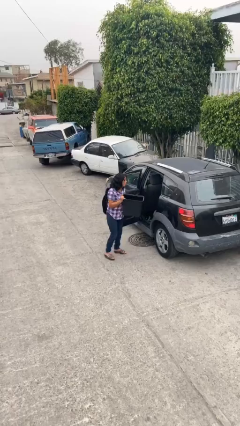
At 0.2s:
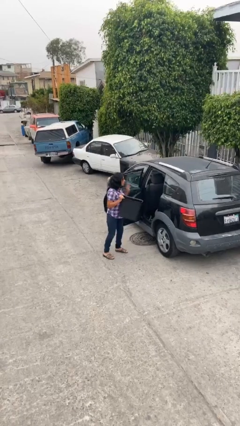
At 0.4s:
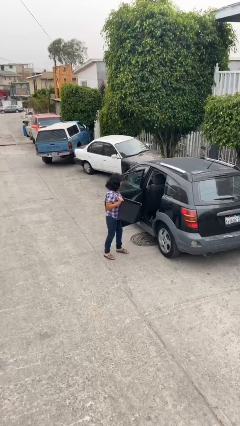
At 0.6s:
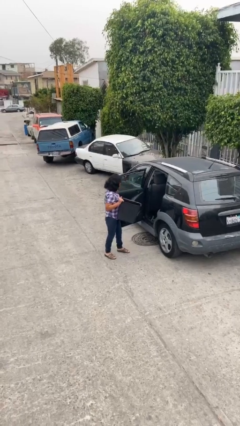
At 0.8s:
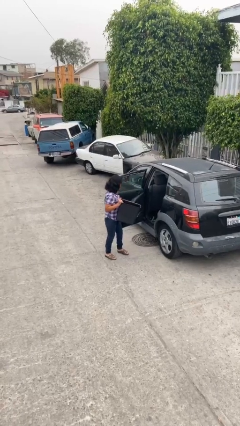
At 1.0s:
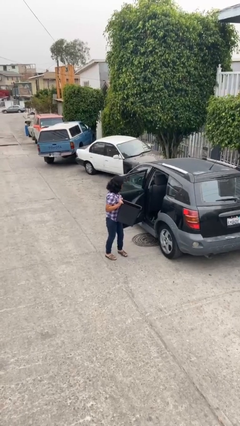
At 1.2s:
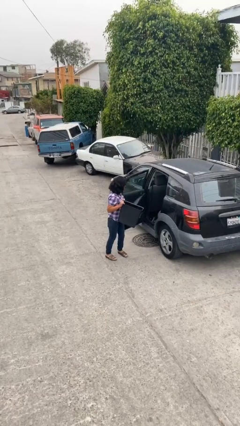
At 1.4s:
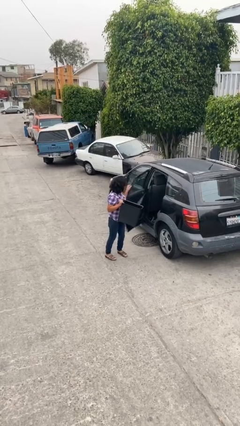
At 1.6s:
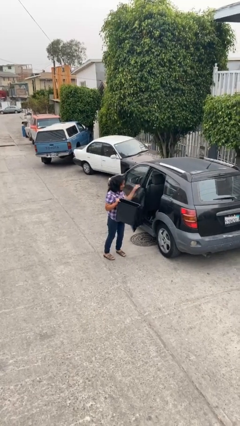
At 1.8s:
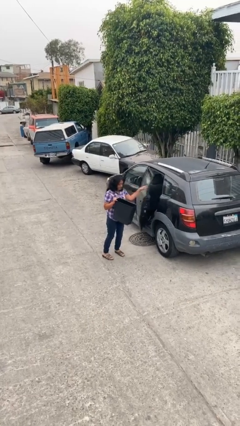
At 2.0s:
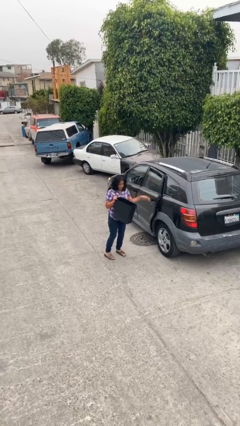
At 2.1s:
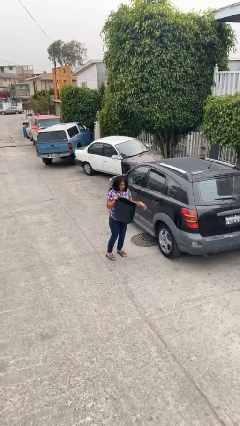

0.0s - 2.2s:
person closes car door

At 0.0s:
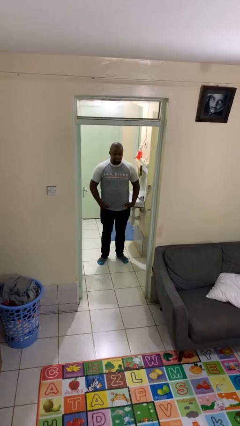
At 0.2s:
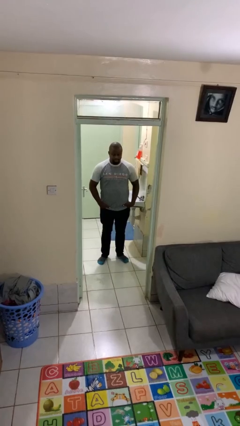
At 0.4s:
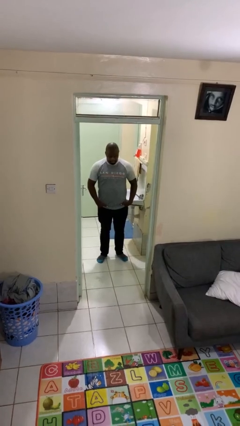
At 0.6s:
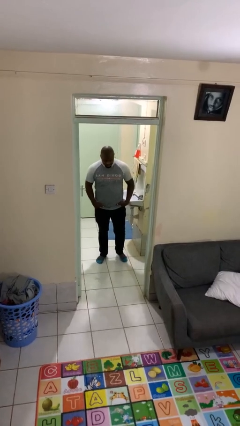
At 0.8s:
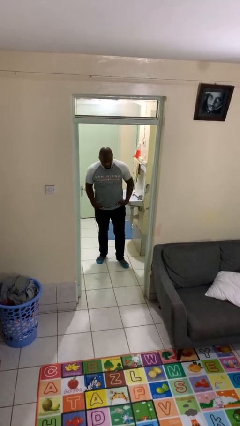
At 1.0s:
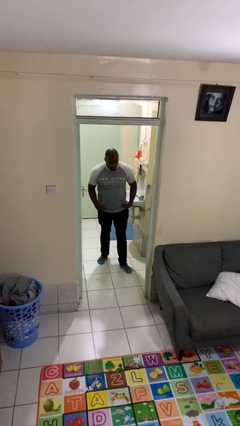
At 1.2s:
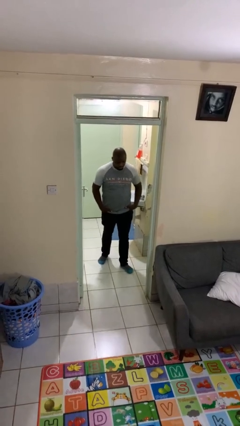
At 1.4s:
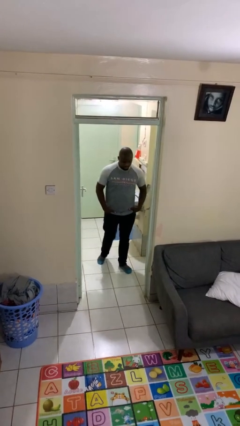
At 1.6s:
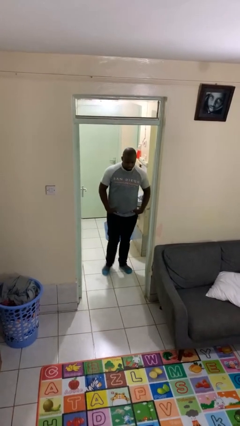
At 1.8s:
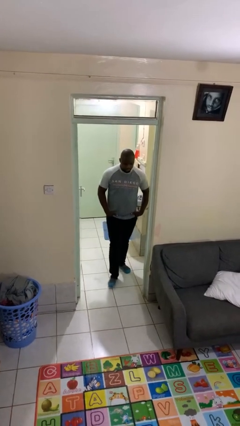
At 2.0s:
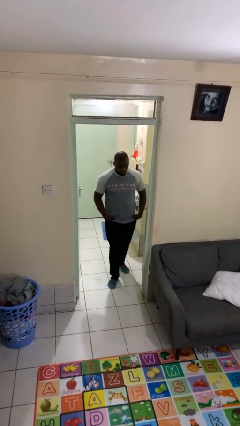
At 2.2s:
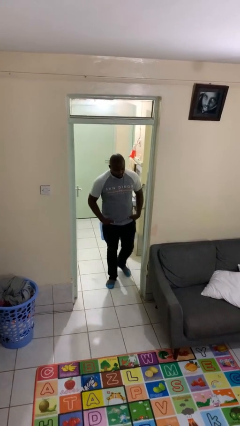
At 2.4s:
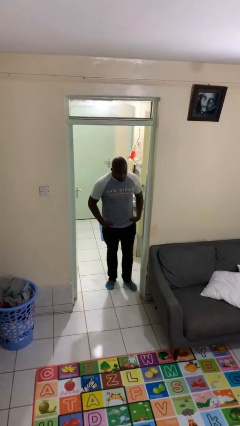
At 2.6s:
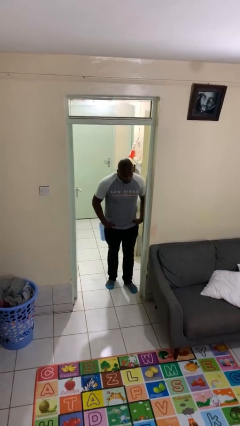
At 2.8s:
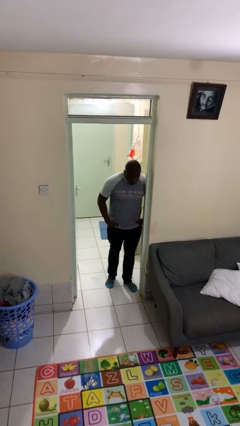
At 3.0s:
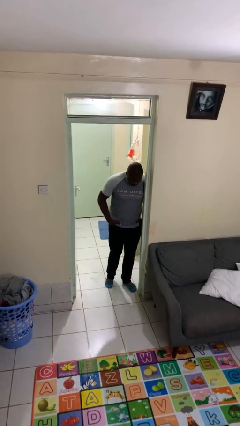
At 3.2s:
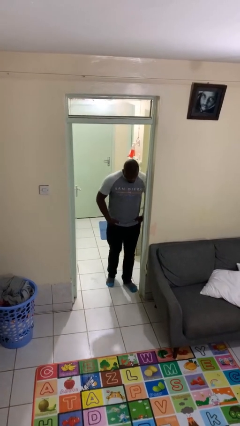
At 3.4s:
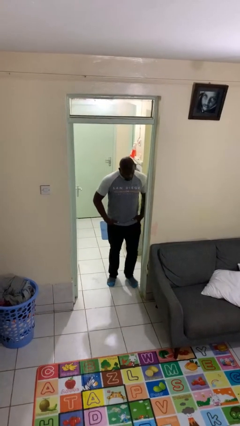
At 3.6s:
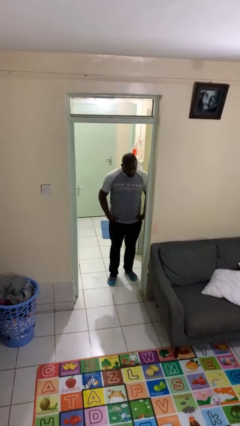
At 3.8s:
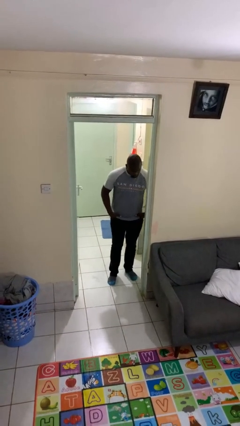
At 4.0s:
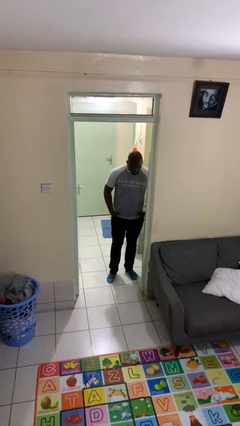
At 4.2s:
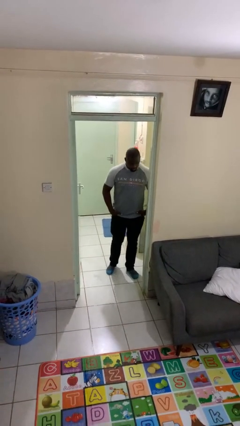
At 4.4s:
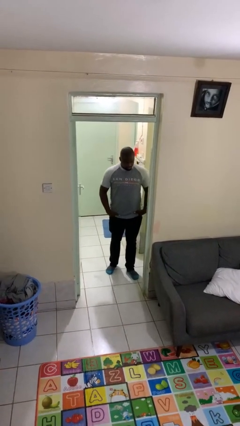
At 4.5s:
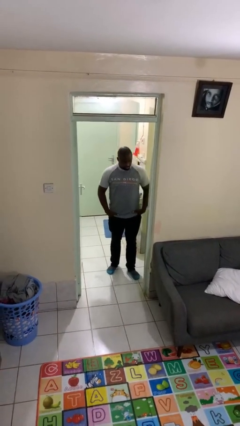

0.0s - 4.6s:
person bumps into wall

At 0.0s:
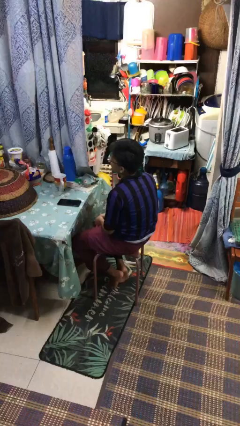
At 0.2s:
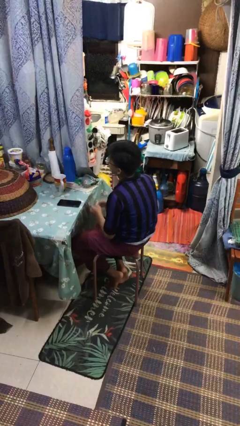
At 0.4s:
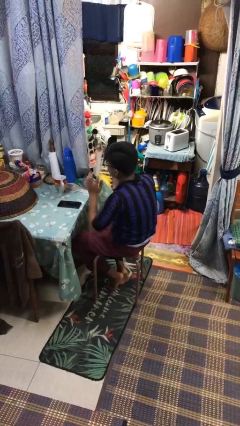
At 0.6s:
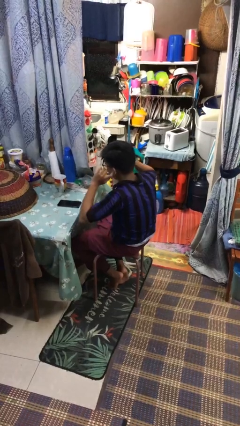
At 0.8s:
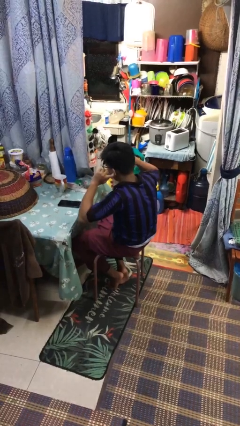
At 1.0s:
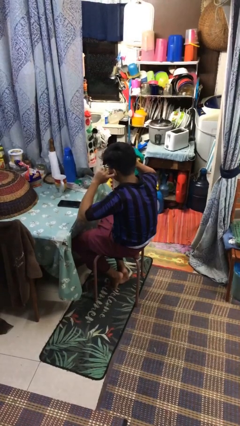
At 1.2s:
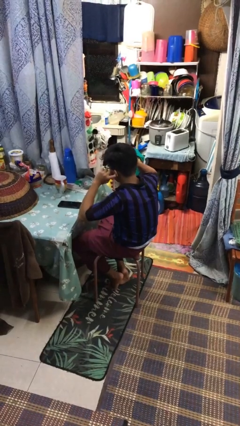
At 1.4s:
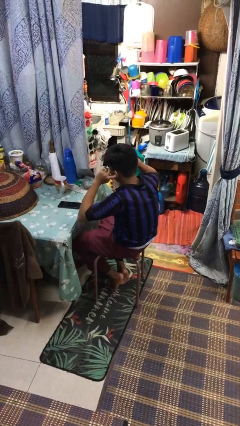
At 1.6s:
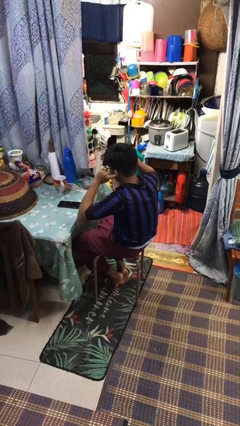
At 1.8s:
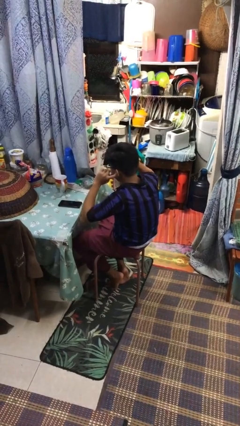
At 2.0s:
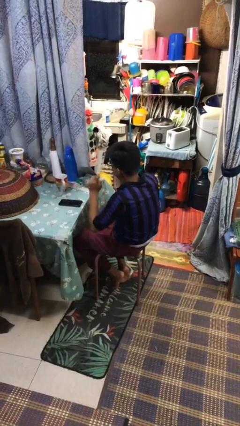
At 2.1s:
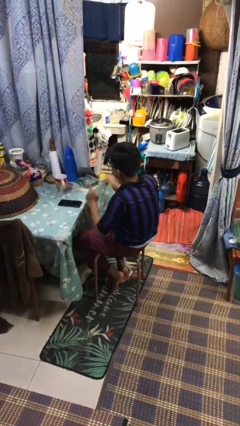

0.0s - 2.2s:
person puts fingers in ear

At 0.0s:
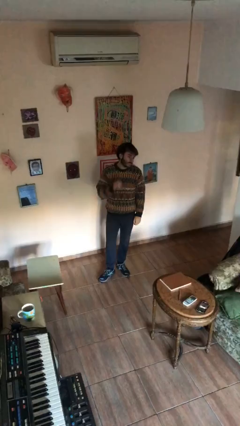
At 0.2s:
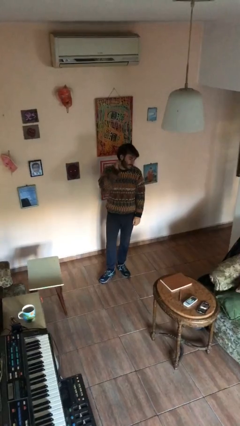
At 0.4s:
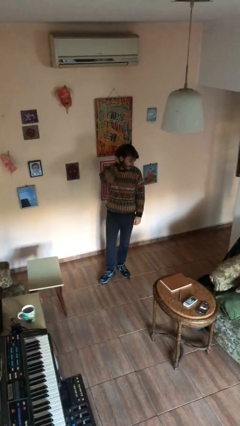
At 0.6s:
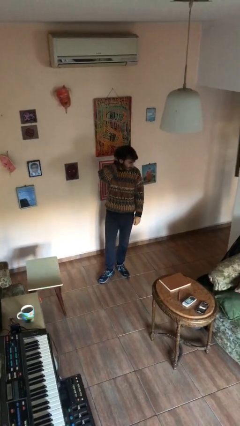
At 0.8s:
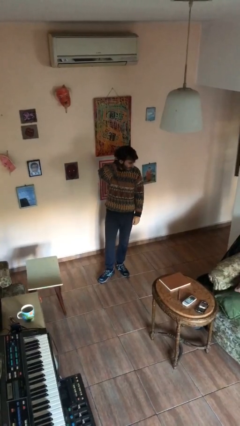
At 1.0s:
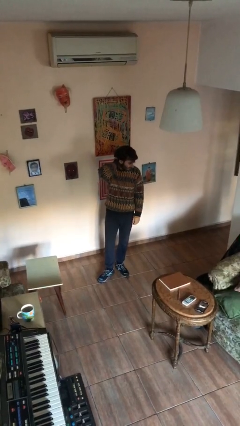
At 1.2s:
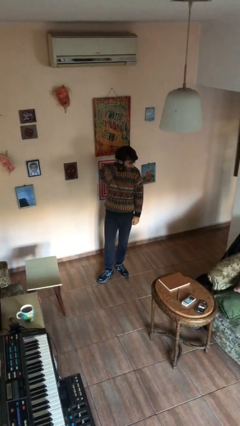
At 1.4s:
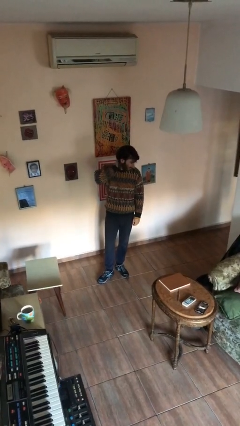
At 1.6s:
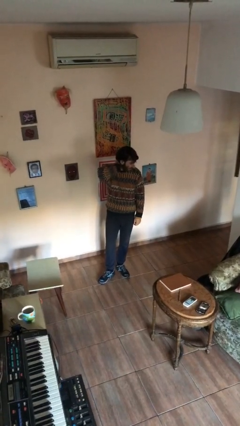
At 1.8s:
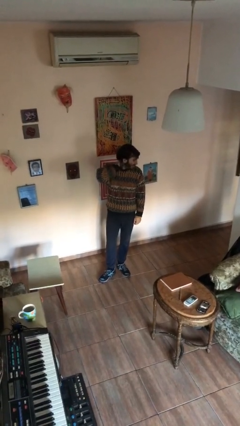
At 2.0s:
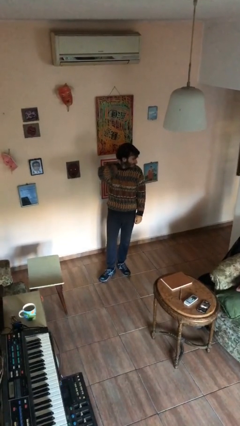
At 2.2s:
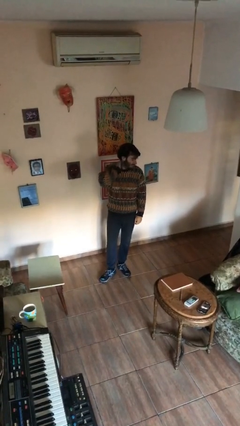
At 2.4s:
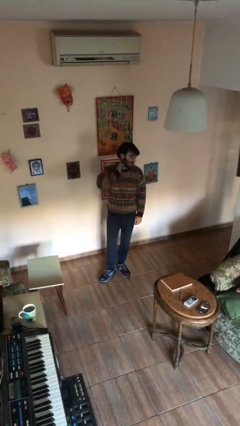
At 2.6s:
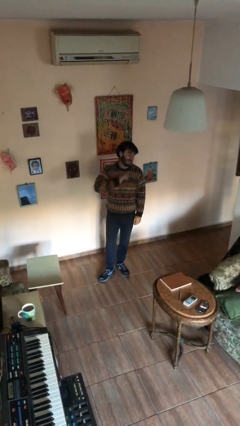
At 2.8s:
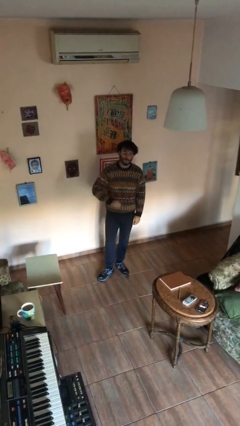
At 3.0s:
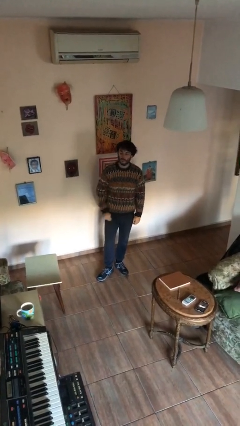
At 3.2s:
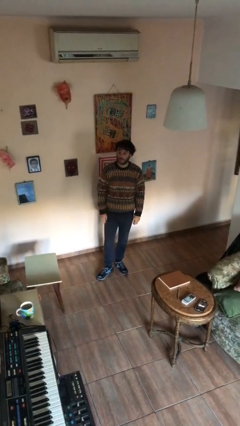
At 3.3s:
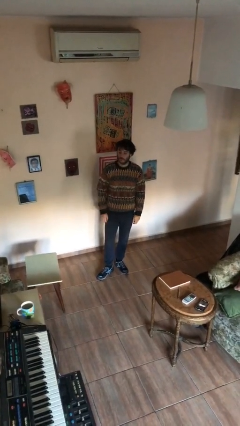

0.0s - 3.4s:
person scratches face

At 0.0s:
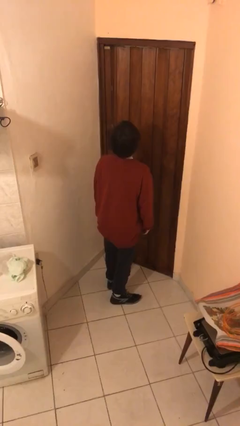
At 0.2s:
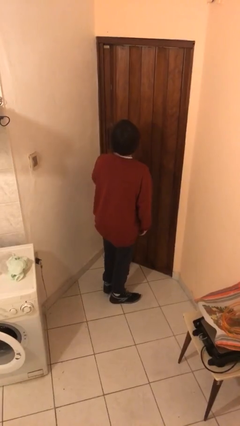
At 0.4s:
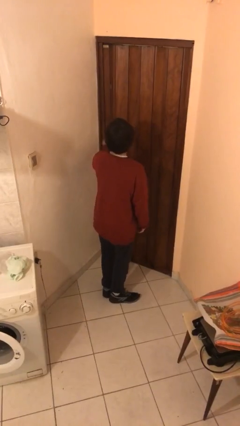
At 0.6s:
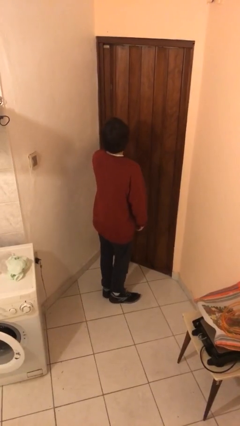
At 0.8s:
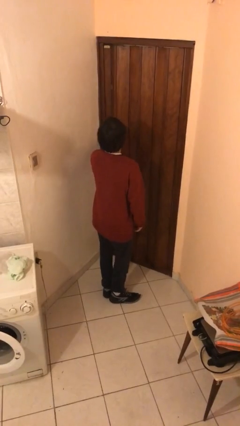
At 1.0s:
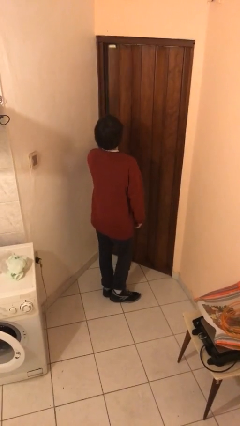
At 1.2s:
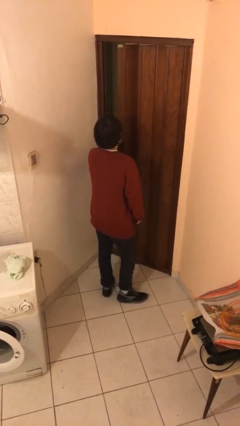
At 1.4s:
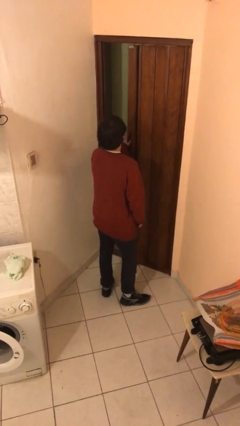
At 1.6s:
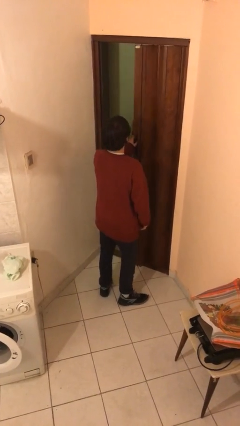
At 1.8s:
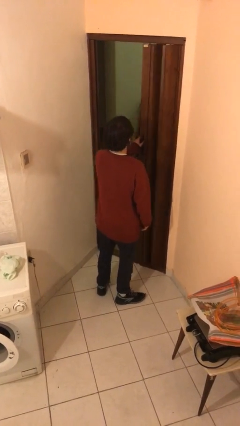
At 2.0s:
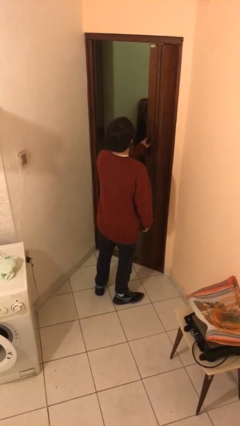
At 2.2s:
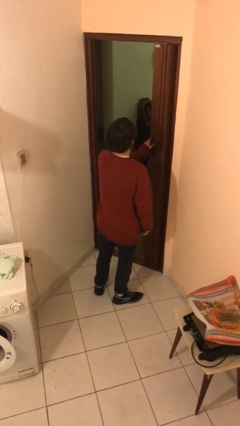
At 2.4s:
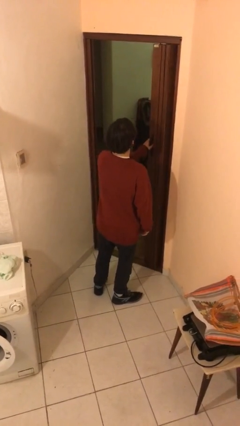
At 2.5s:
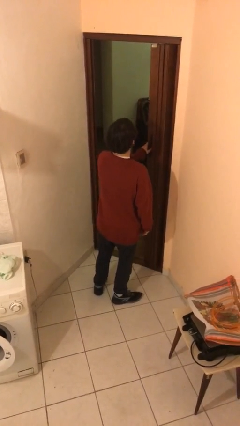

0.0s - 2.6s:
person opens sliding door

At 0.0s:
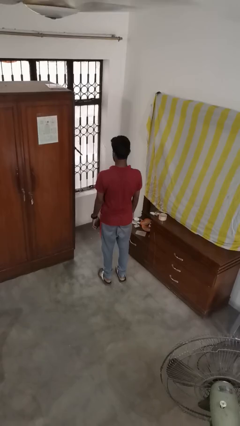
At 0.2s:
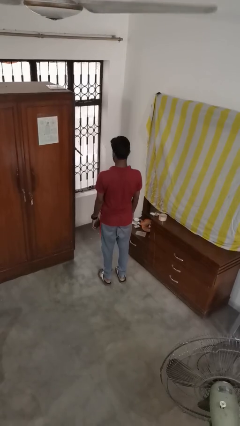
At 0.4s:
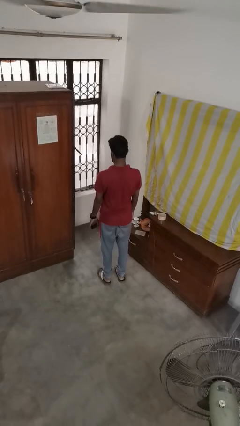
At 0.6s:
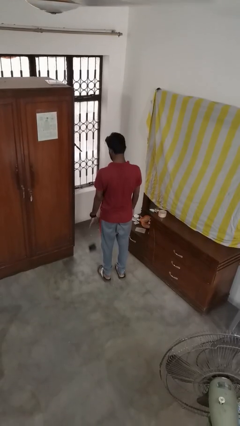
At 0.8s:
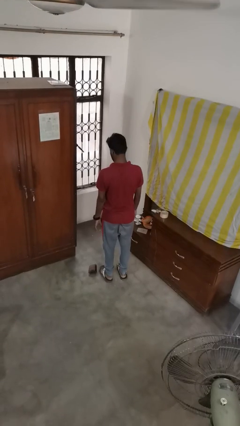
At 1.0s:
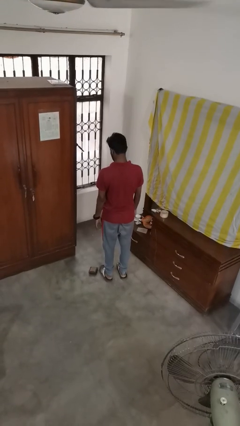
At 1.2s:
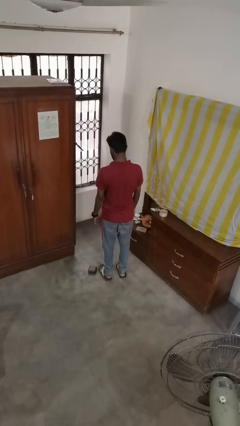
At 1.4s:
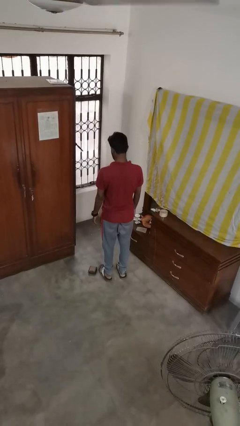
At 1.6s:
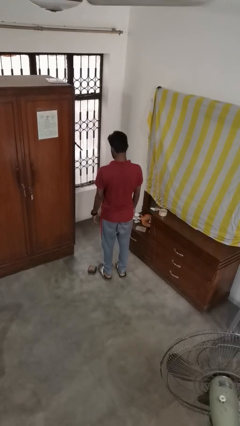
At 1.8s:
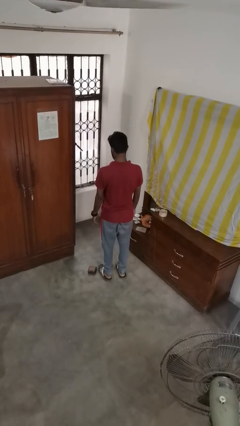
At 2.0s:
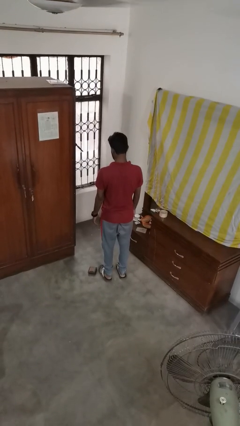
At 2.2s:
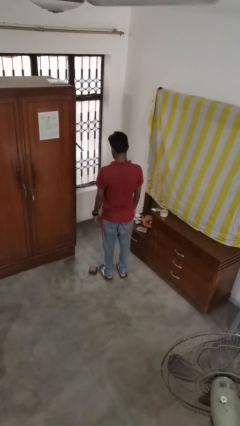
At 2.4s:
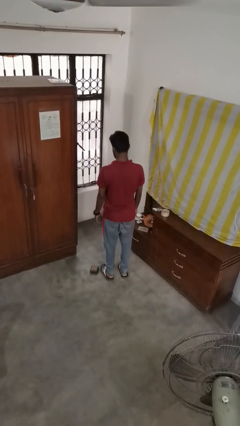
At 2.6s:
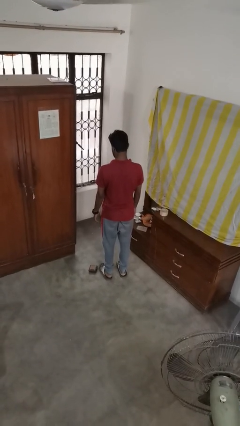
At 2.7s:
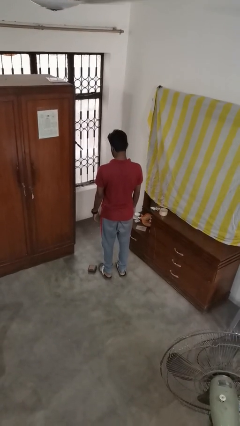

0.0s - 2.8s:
person throws object to ground

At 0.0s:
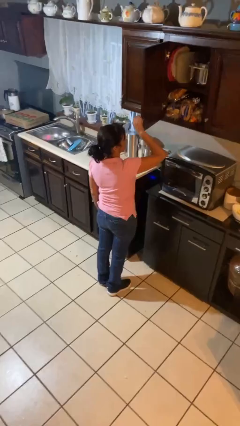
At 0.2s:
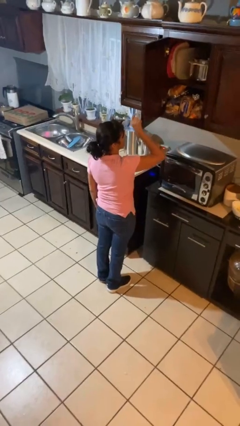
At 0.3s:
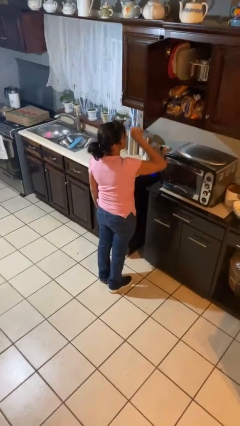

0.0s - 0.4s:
person opens cabinet
